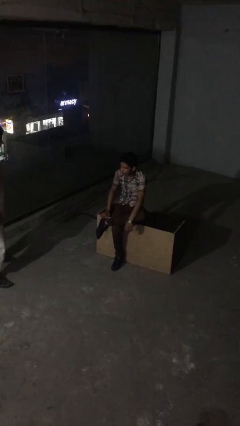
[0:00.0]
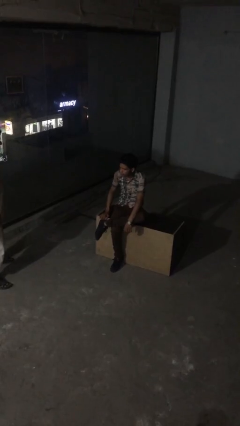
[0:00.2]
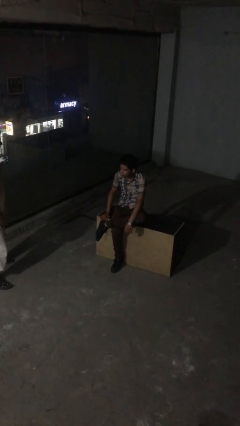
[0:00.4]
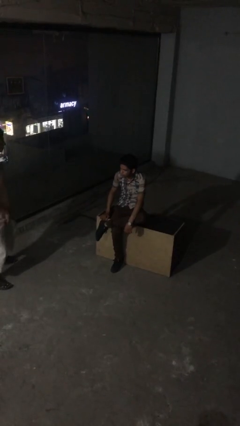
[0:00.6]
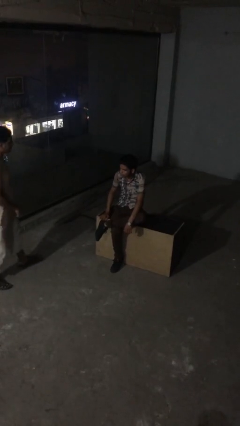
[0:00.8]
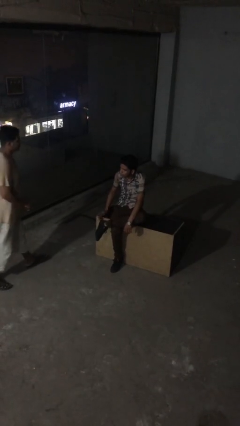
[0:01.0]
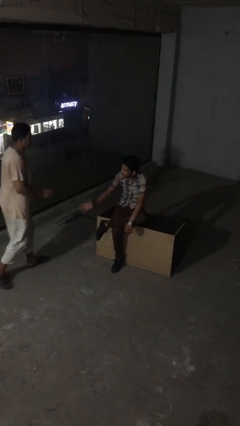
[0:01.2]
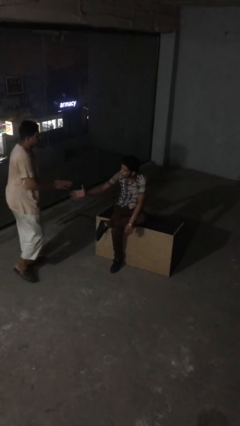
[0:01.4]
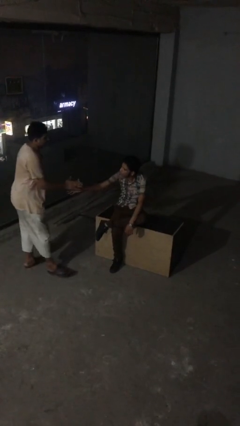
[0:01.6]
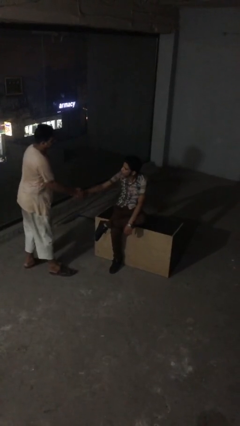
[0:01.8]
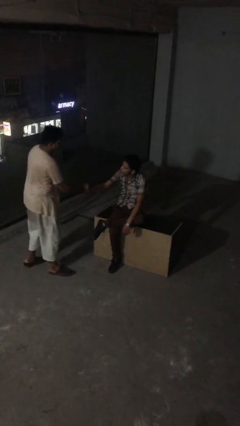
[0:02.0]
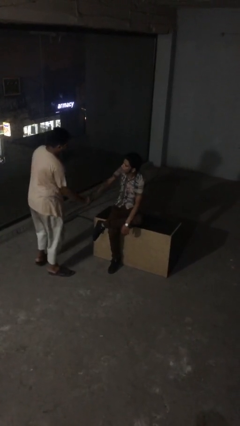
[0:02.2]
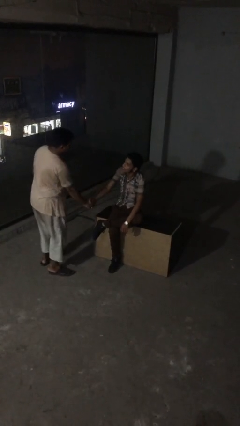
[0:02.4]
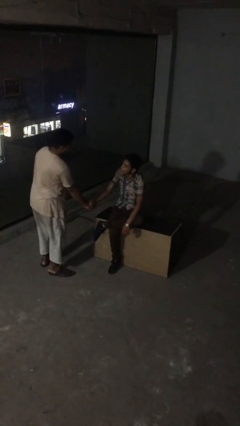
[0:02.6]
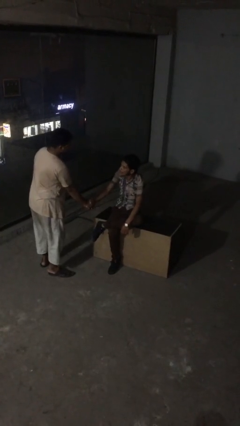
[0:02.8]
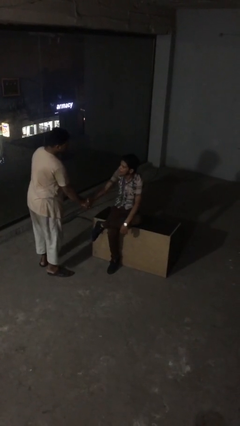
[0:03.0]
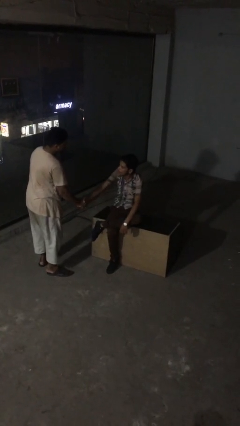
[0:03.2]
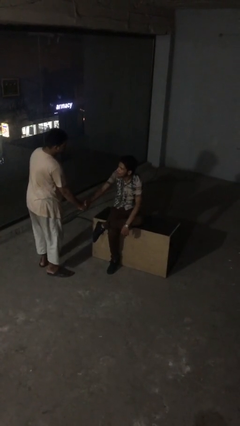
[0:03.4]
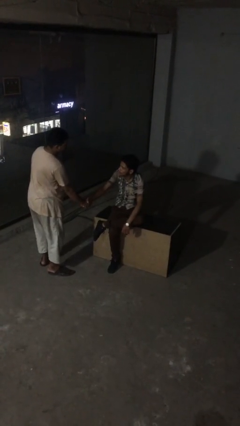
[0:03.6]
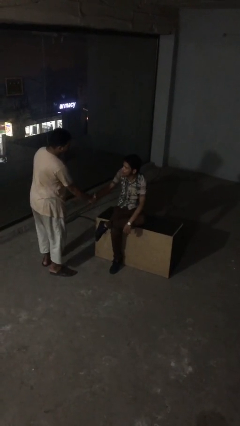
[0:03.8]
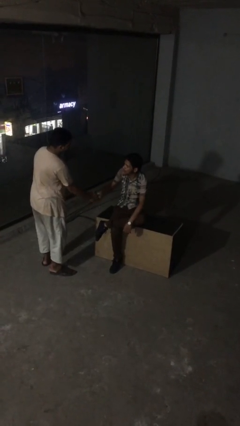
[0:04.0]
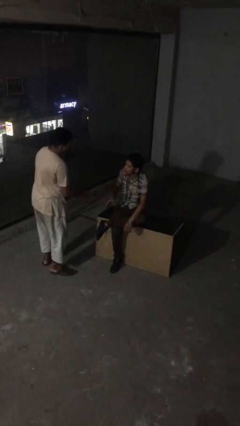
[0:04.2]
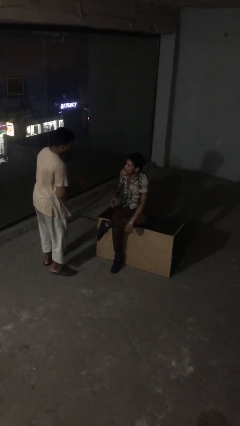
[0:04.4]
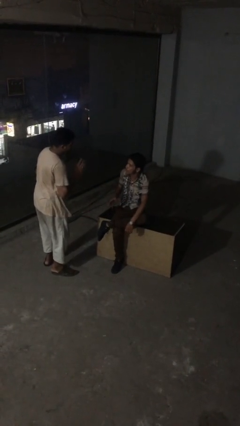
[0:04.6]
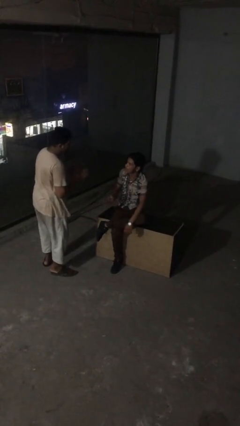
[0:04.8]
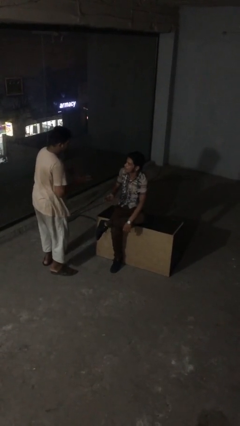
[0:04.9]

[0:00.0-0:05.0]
person shakes hand

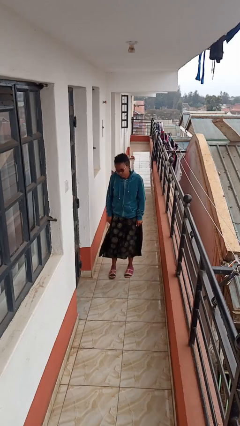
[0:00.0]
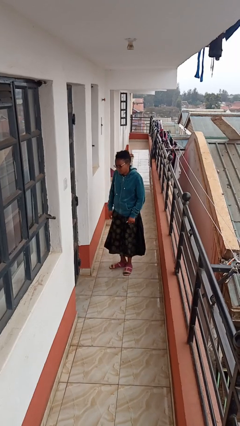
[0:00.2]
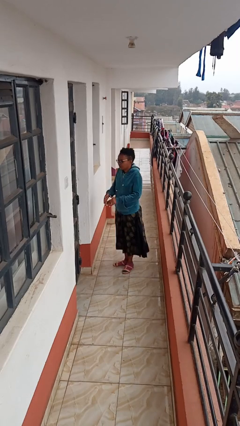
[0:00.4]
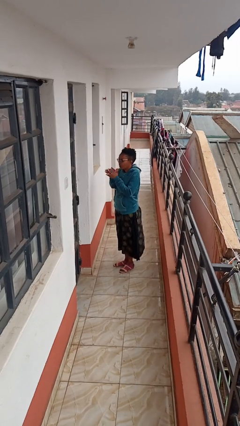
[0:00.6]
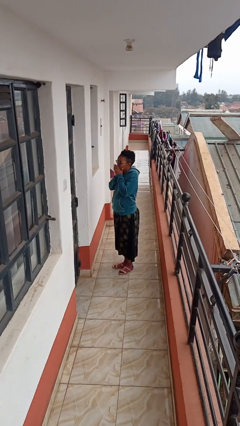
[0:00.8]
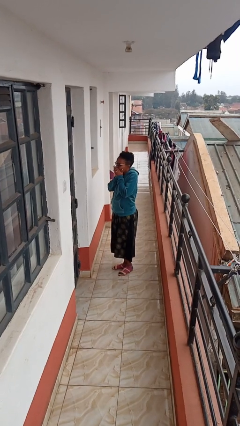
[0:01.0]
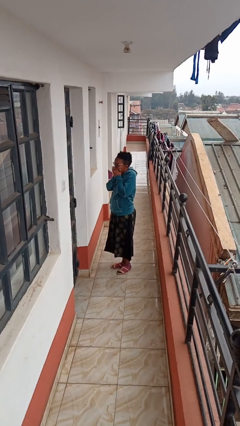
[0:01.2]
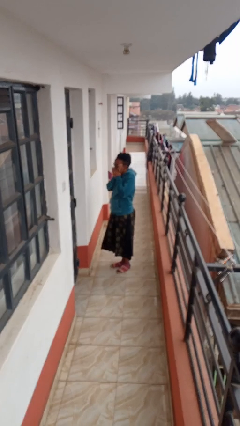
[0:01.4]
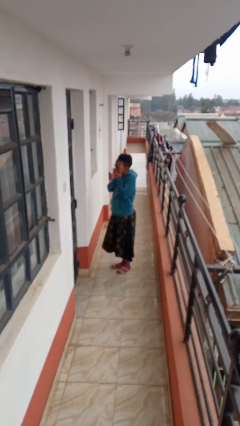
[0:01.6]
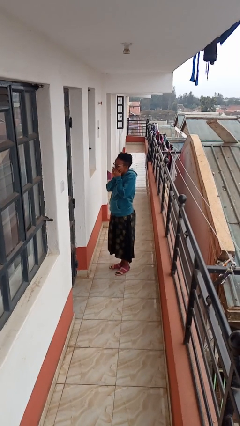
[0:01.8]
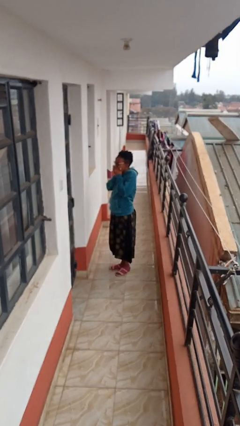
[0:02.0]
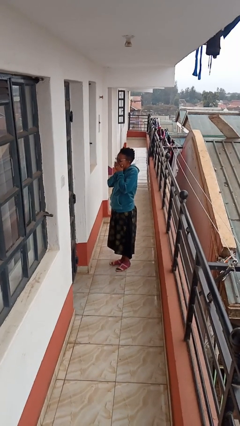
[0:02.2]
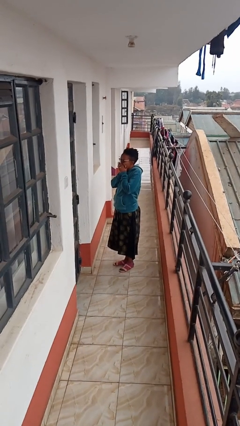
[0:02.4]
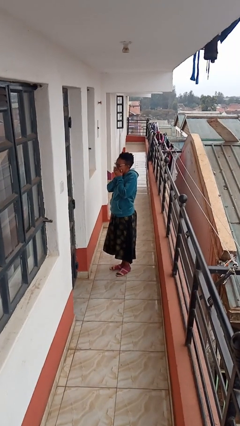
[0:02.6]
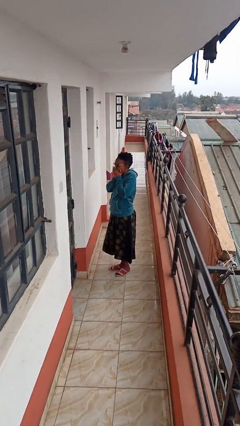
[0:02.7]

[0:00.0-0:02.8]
person blows into hands

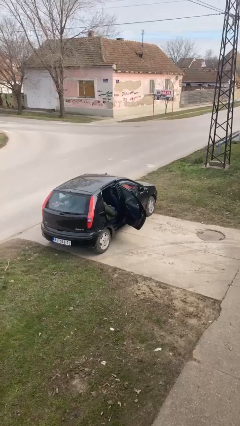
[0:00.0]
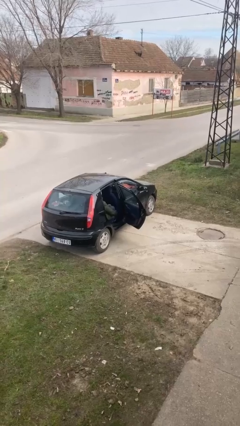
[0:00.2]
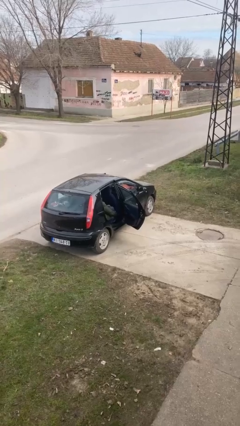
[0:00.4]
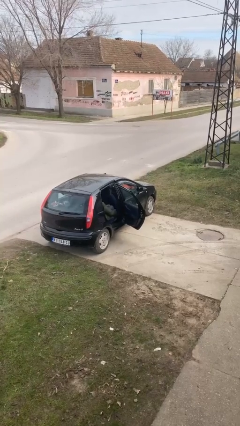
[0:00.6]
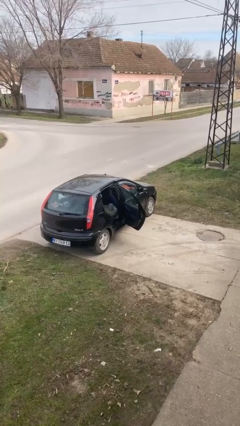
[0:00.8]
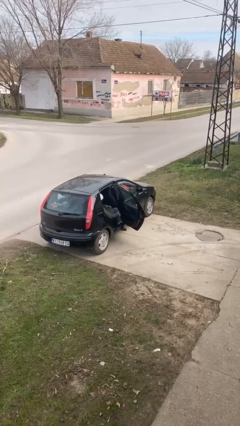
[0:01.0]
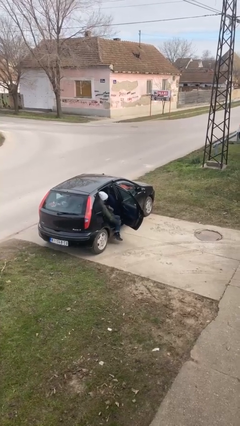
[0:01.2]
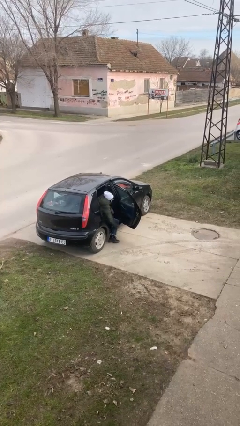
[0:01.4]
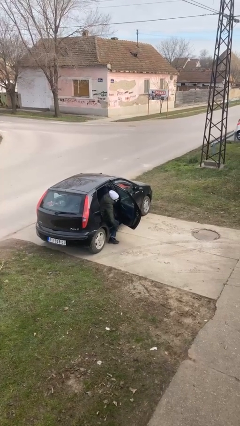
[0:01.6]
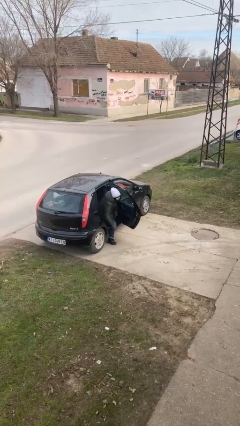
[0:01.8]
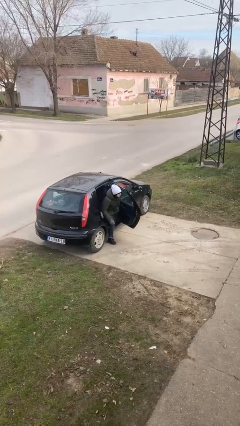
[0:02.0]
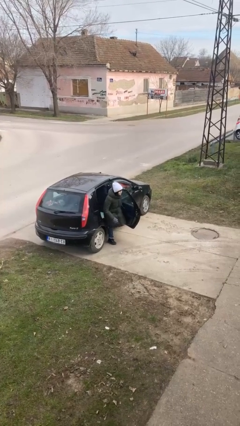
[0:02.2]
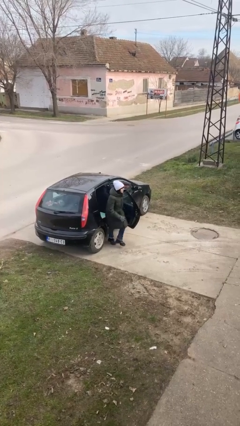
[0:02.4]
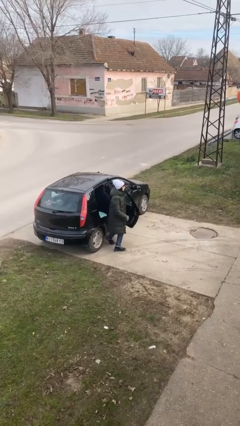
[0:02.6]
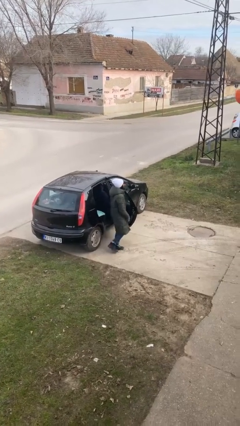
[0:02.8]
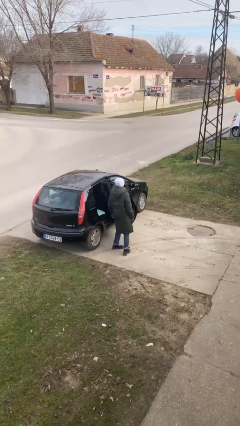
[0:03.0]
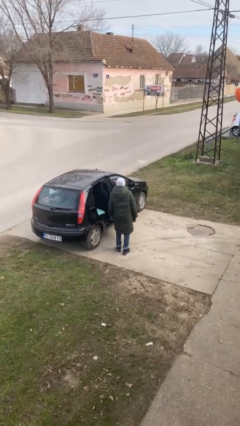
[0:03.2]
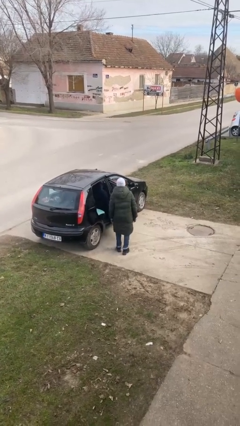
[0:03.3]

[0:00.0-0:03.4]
person exits car

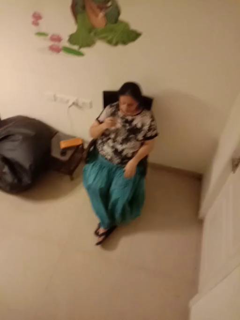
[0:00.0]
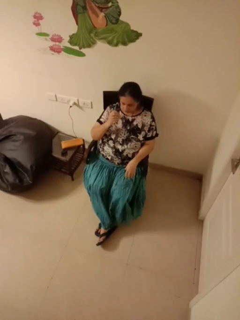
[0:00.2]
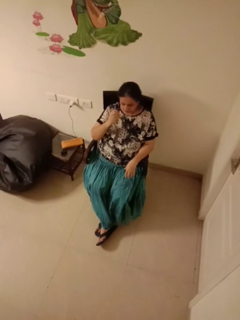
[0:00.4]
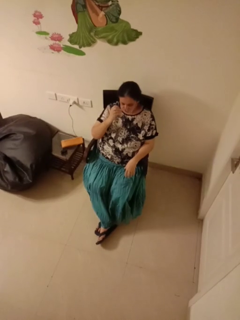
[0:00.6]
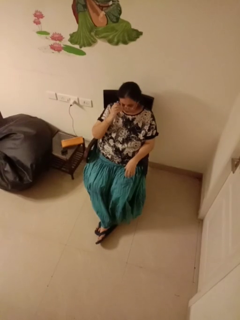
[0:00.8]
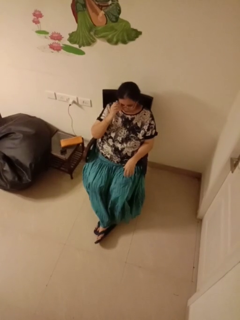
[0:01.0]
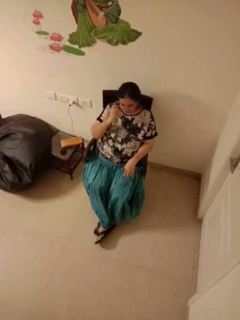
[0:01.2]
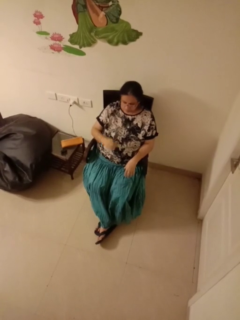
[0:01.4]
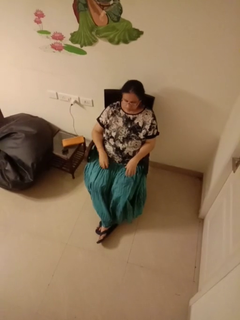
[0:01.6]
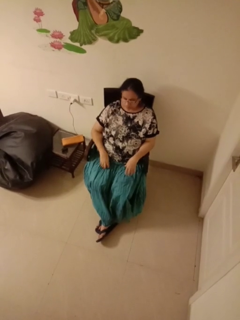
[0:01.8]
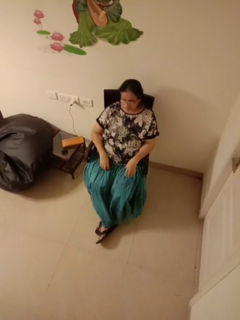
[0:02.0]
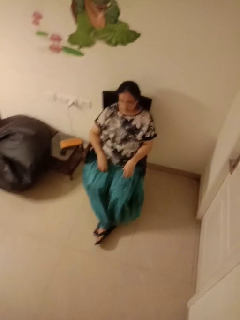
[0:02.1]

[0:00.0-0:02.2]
person puts on glasses

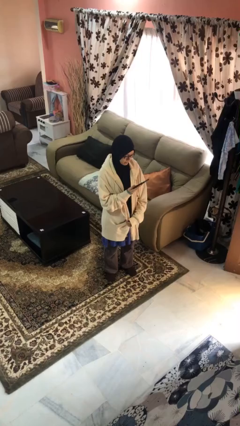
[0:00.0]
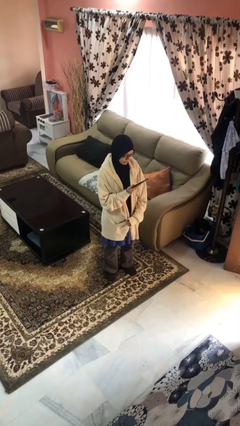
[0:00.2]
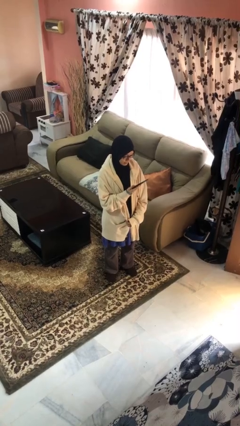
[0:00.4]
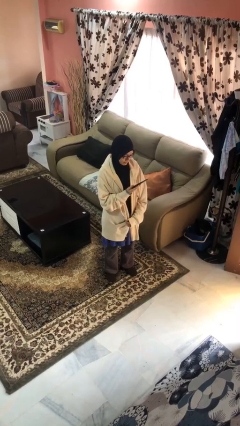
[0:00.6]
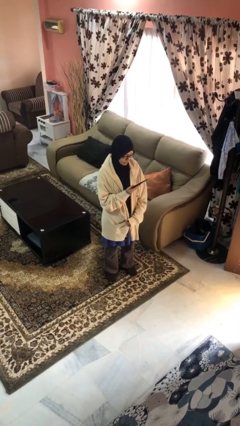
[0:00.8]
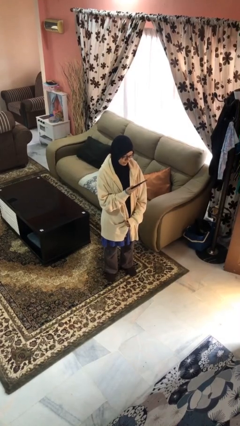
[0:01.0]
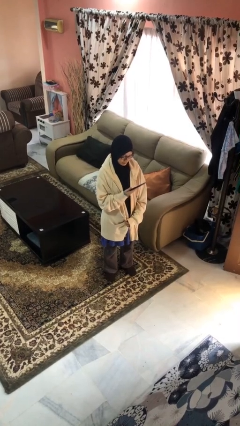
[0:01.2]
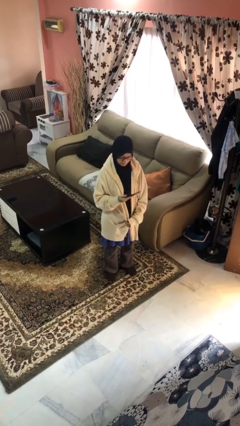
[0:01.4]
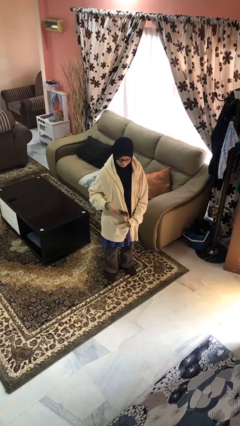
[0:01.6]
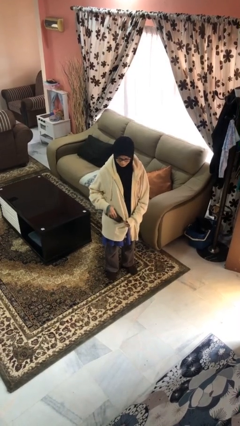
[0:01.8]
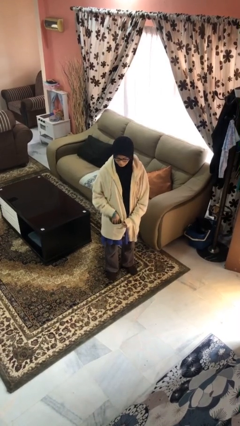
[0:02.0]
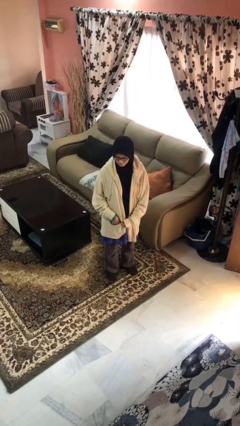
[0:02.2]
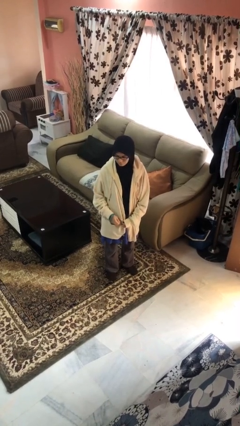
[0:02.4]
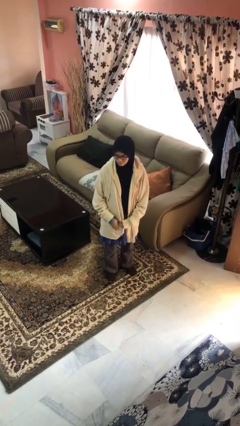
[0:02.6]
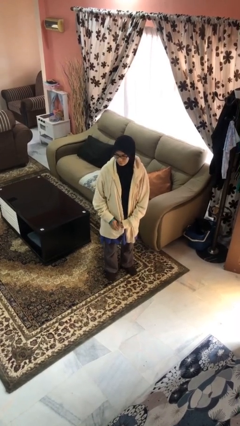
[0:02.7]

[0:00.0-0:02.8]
person puts phone into pocket

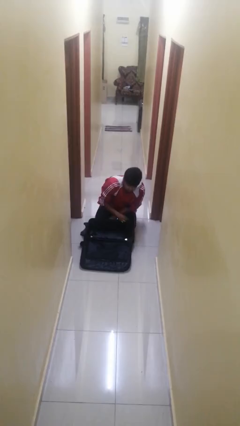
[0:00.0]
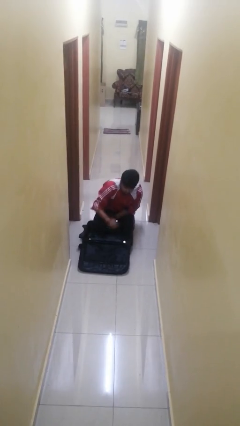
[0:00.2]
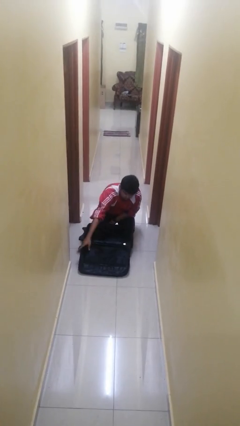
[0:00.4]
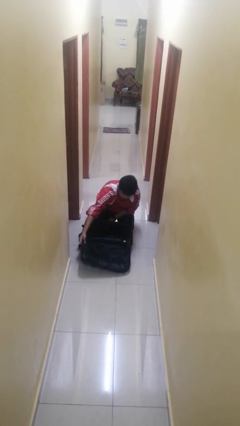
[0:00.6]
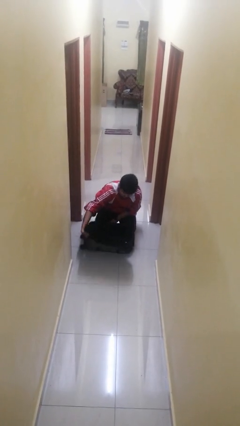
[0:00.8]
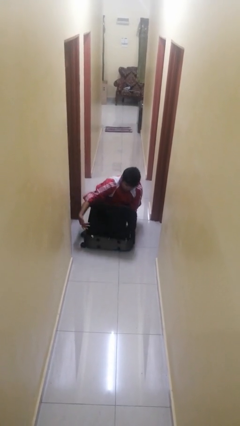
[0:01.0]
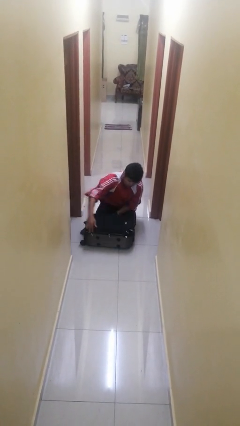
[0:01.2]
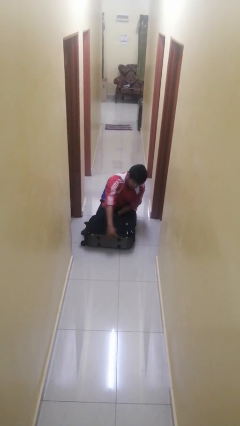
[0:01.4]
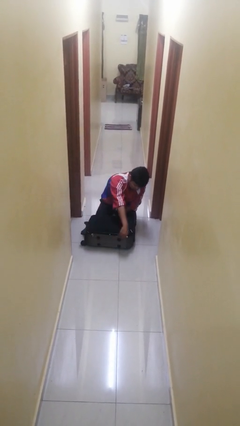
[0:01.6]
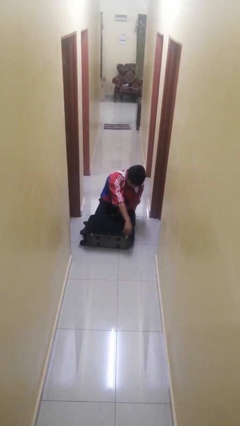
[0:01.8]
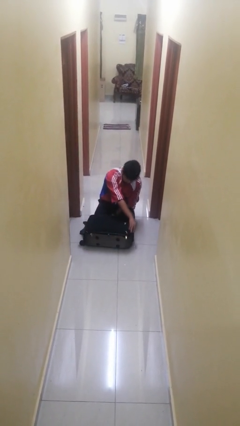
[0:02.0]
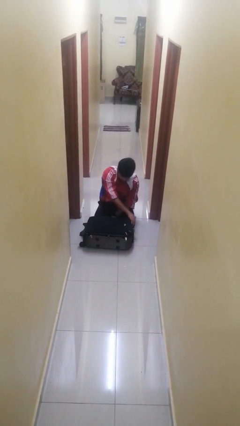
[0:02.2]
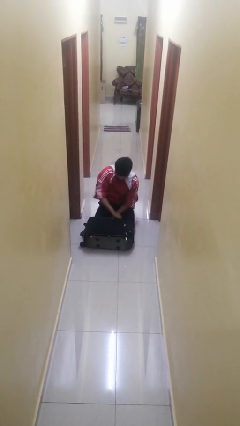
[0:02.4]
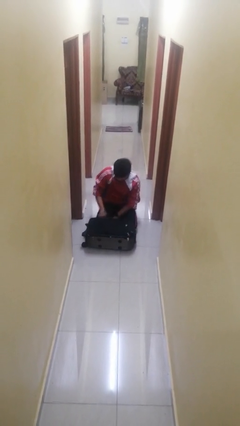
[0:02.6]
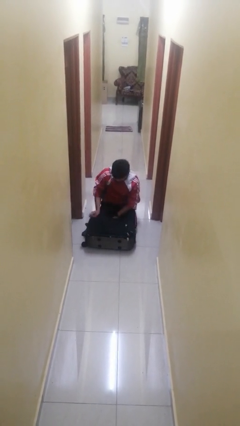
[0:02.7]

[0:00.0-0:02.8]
person closes suitcase
